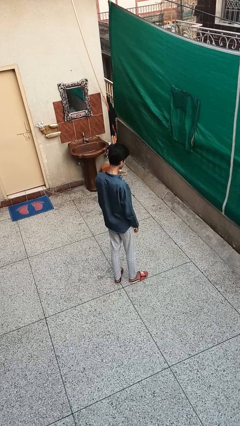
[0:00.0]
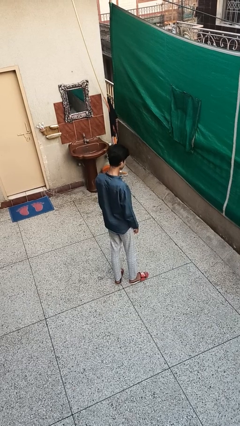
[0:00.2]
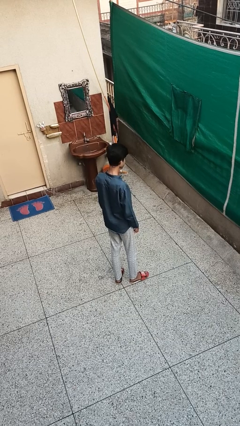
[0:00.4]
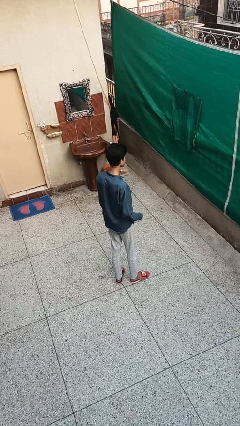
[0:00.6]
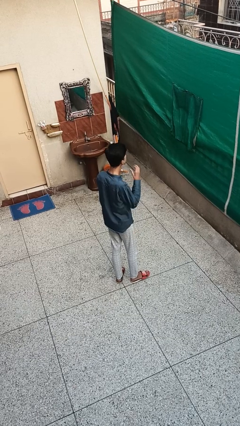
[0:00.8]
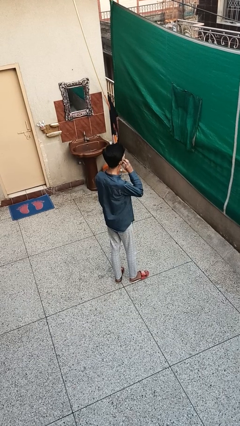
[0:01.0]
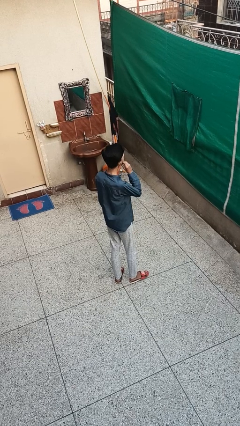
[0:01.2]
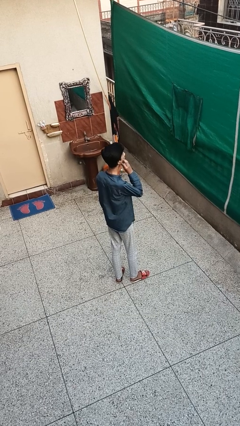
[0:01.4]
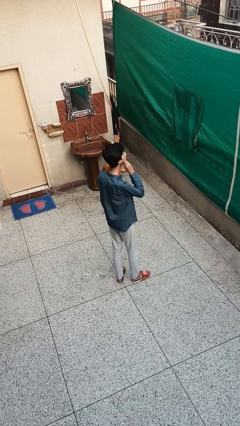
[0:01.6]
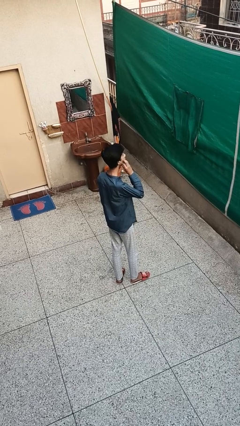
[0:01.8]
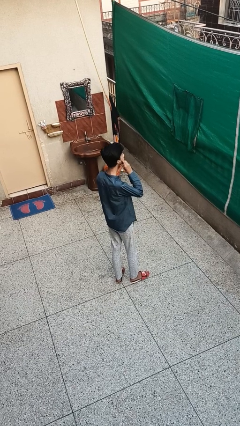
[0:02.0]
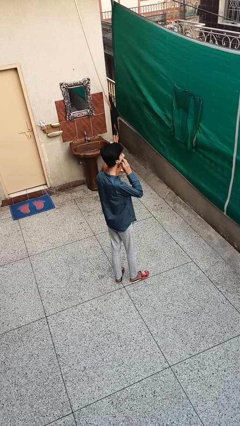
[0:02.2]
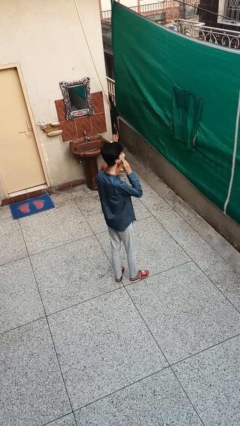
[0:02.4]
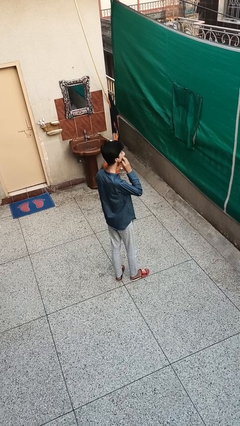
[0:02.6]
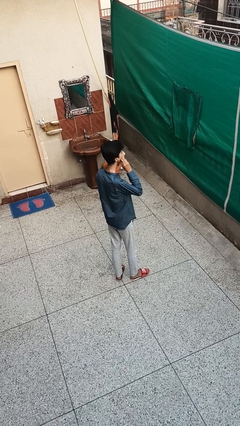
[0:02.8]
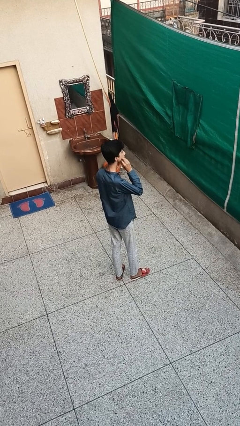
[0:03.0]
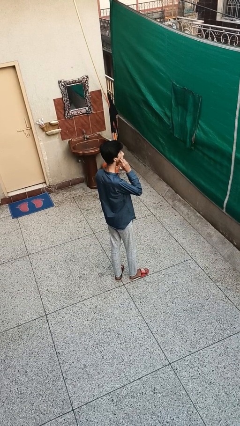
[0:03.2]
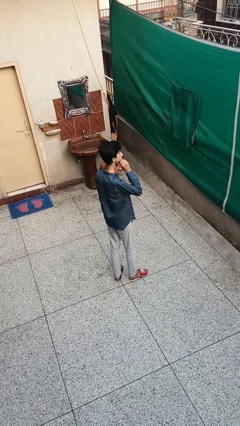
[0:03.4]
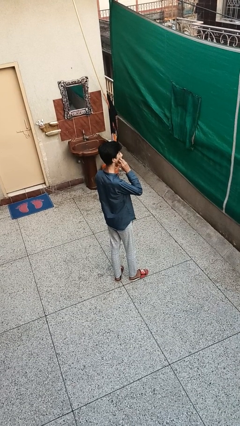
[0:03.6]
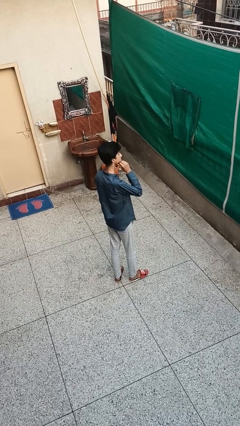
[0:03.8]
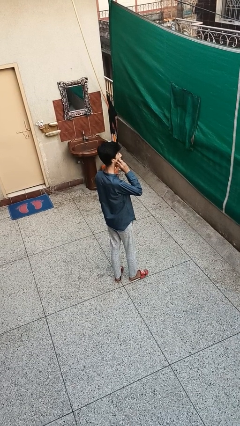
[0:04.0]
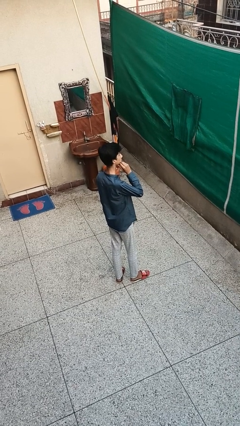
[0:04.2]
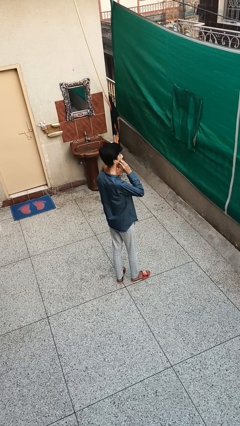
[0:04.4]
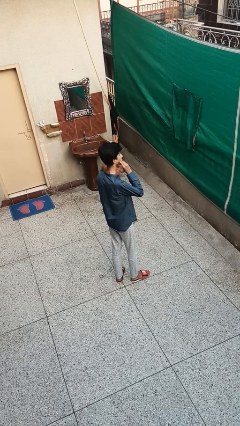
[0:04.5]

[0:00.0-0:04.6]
person scratches face

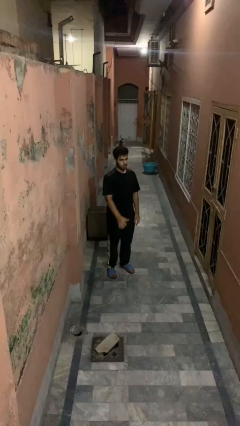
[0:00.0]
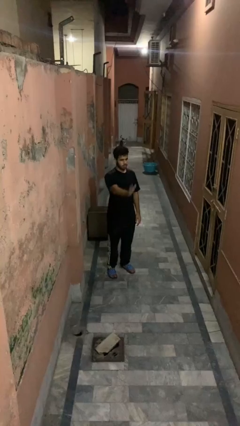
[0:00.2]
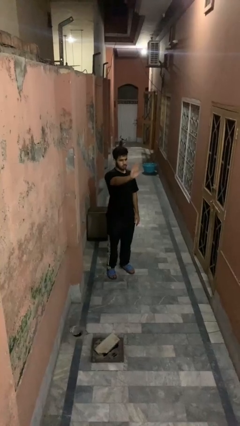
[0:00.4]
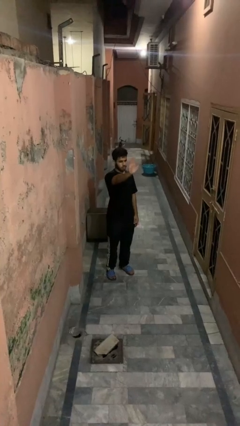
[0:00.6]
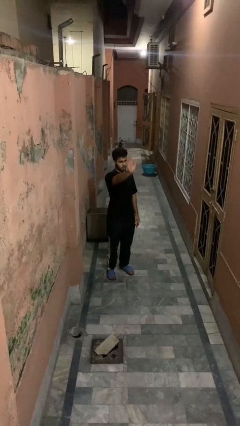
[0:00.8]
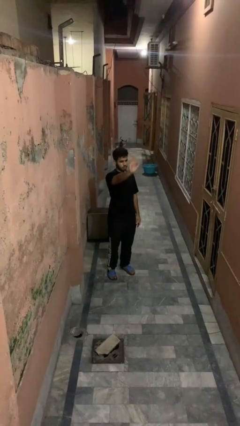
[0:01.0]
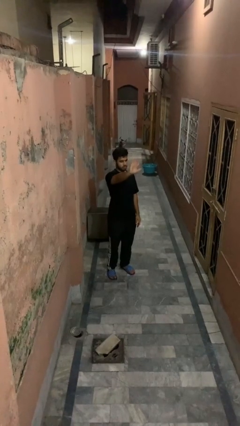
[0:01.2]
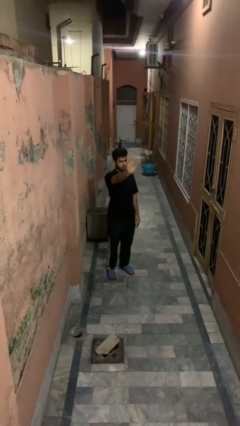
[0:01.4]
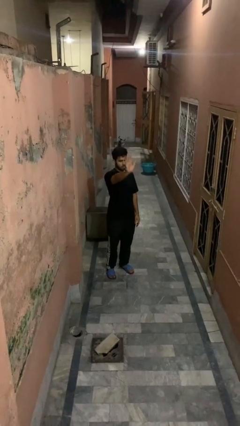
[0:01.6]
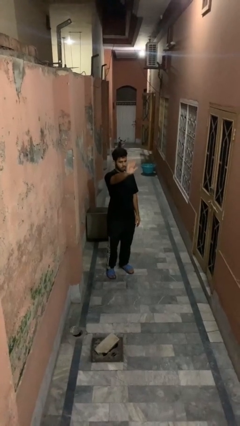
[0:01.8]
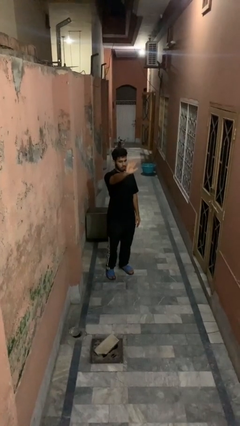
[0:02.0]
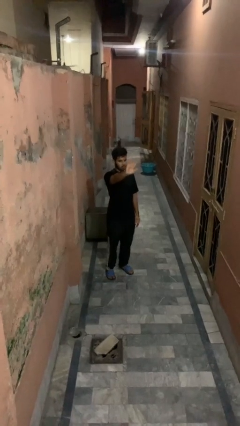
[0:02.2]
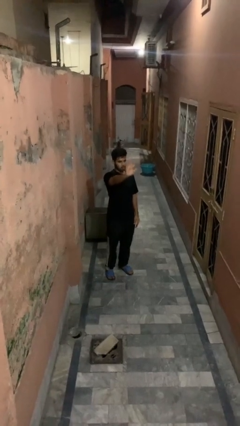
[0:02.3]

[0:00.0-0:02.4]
person waves at person

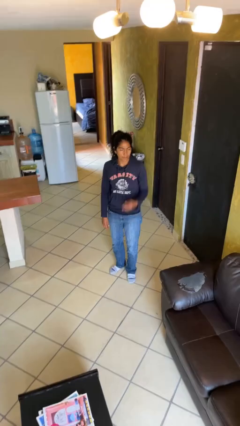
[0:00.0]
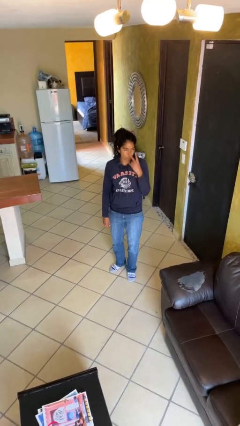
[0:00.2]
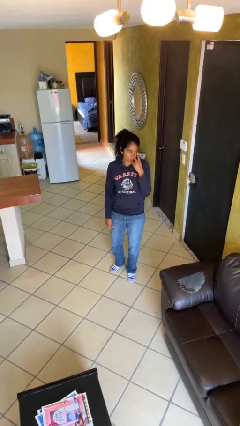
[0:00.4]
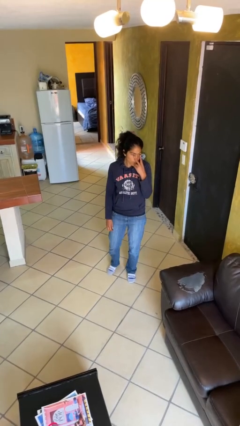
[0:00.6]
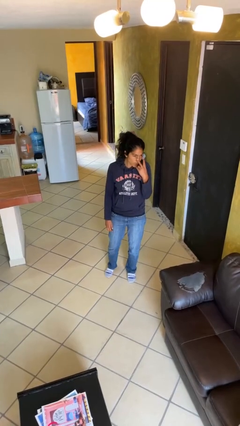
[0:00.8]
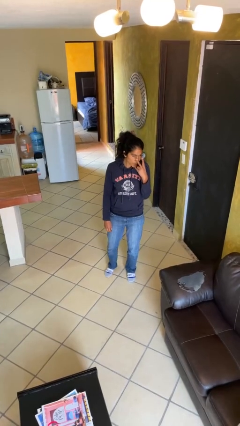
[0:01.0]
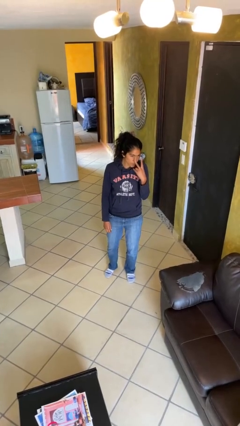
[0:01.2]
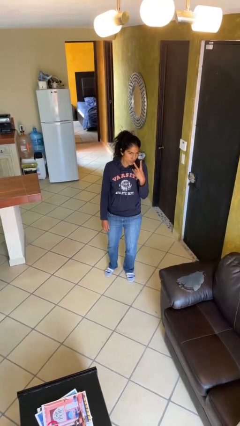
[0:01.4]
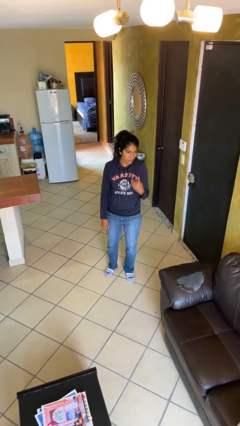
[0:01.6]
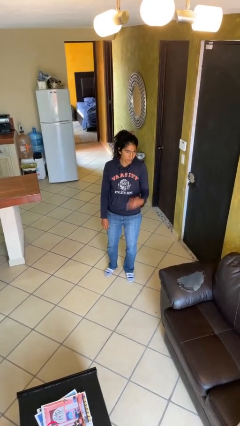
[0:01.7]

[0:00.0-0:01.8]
person gestures watch closely

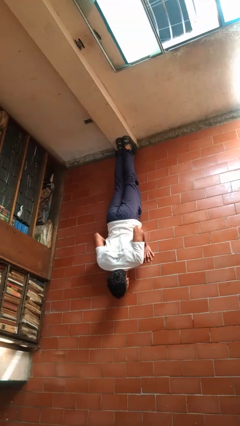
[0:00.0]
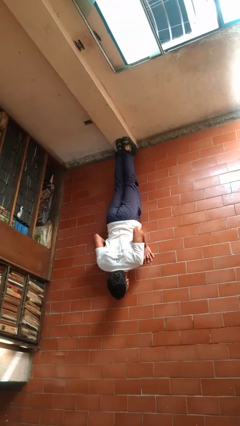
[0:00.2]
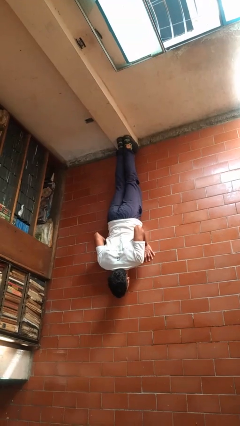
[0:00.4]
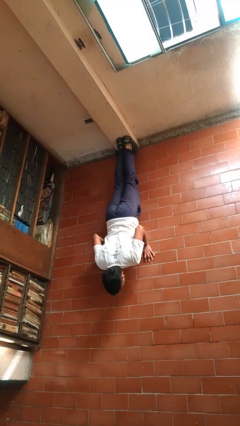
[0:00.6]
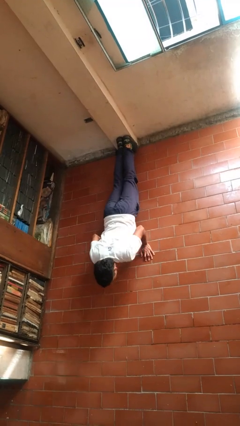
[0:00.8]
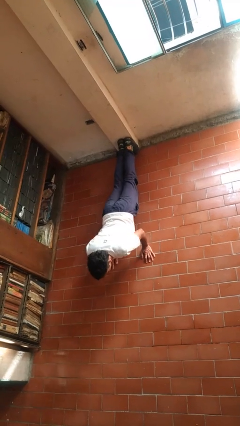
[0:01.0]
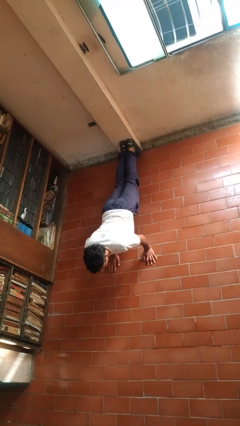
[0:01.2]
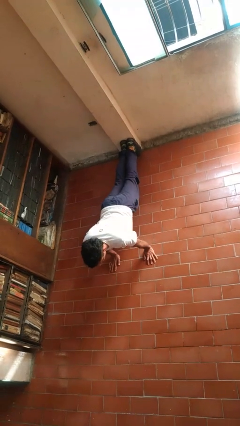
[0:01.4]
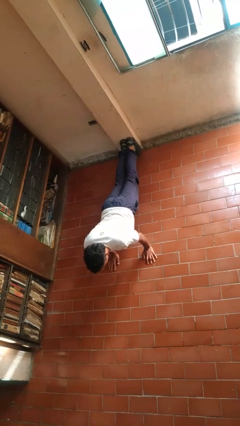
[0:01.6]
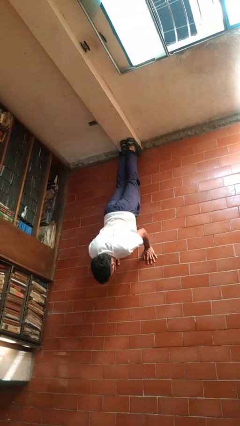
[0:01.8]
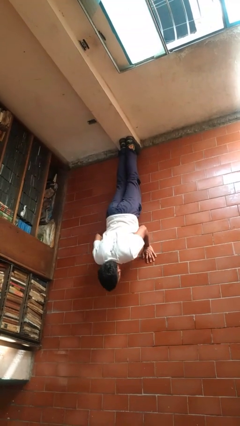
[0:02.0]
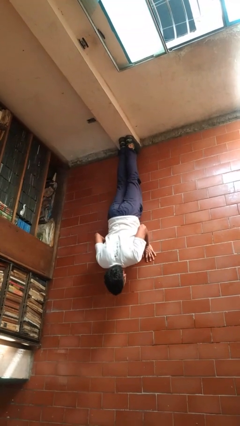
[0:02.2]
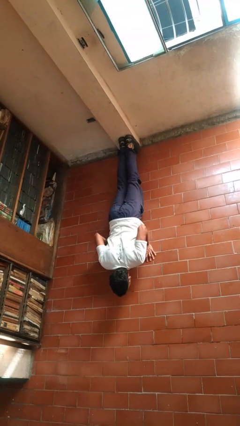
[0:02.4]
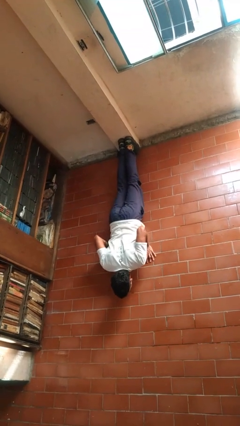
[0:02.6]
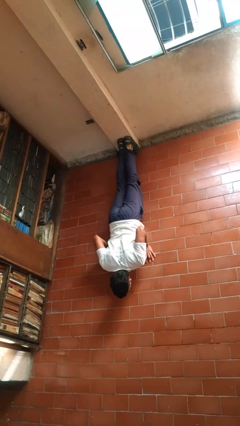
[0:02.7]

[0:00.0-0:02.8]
person exercises with pushup

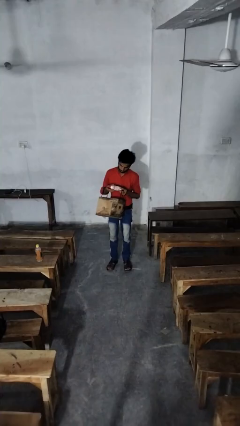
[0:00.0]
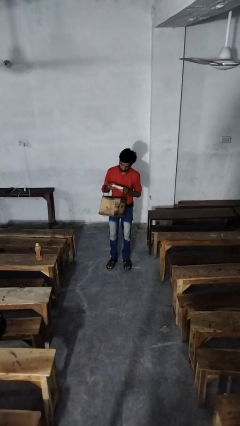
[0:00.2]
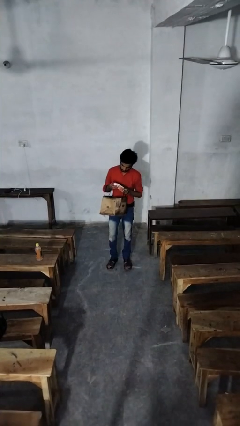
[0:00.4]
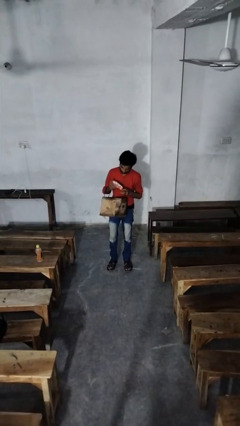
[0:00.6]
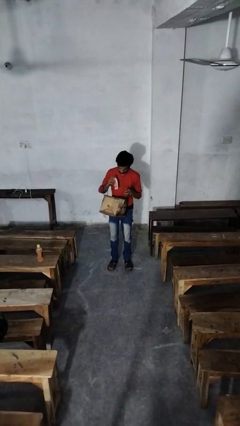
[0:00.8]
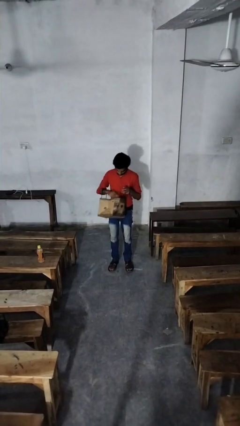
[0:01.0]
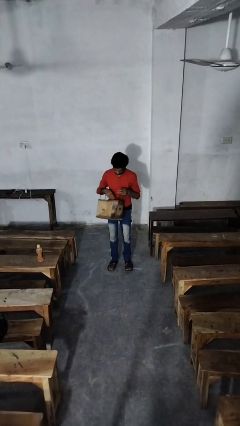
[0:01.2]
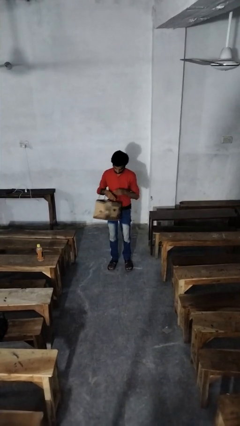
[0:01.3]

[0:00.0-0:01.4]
person puts object into purse

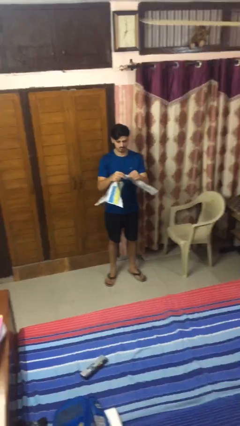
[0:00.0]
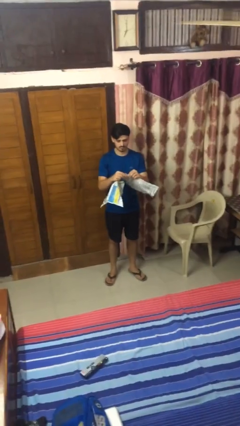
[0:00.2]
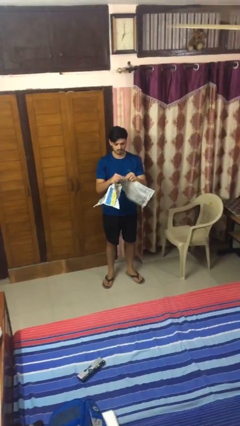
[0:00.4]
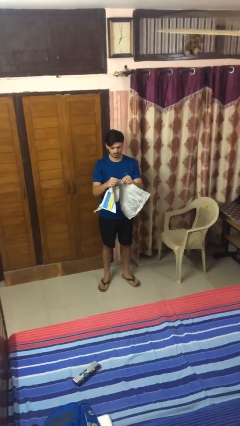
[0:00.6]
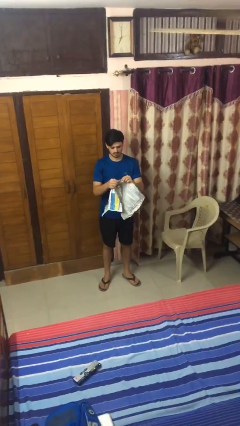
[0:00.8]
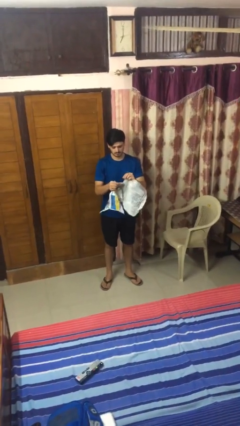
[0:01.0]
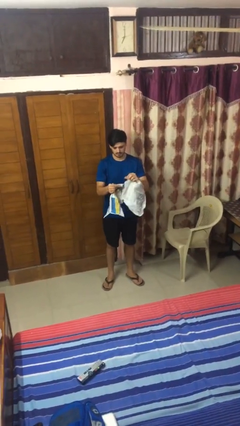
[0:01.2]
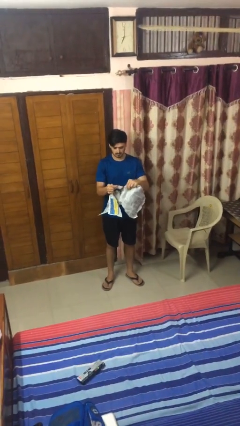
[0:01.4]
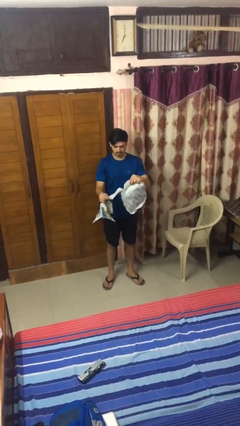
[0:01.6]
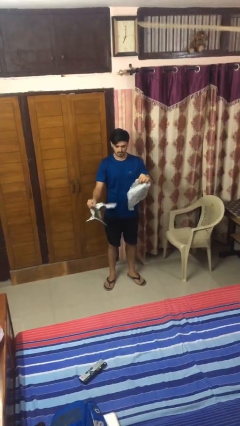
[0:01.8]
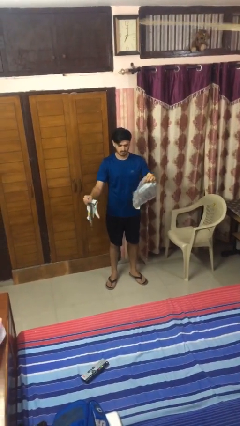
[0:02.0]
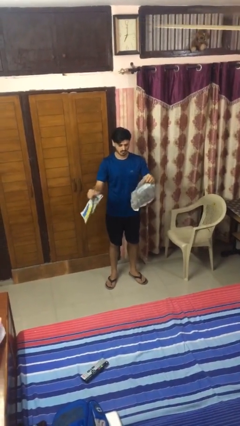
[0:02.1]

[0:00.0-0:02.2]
person tears paper

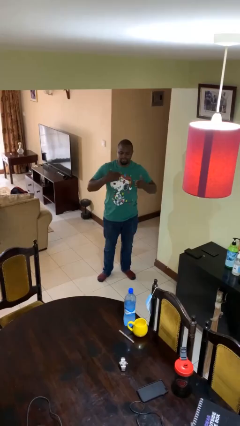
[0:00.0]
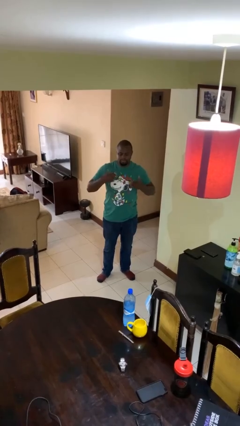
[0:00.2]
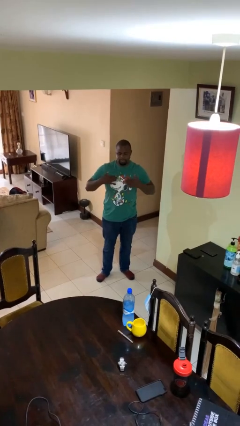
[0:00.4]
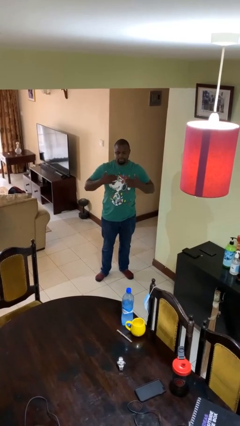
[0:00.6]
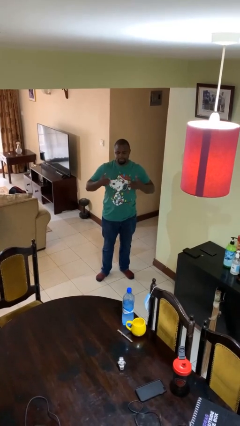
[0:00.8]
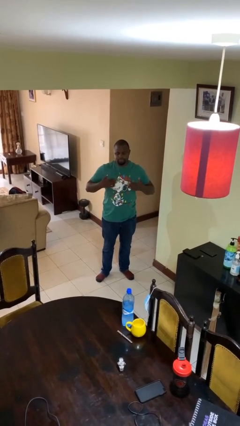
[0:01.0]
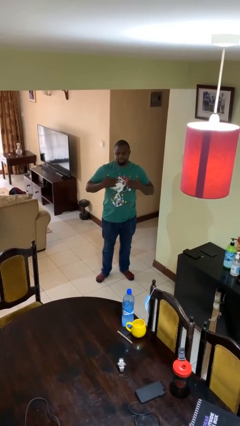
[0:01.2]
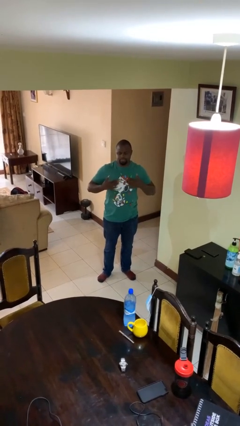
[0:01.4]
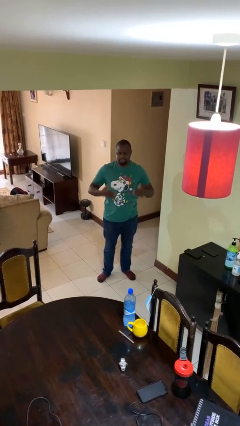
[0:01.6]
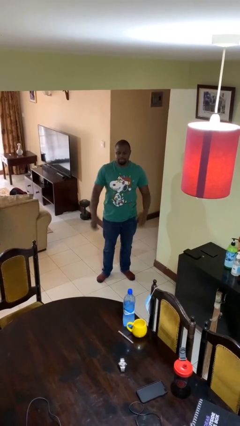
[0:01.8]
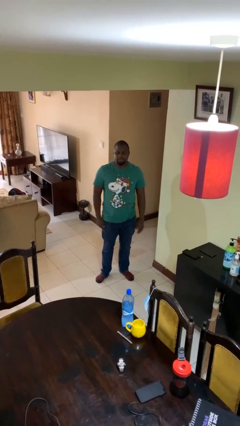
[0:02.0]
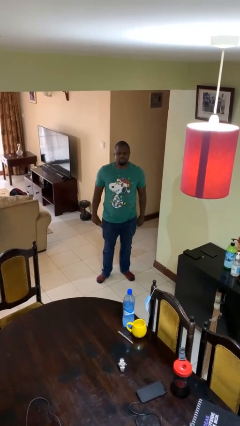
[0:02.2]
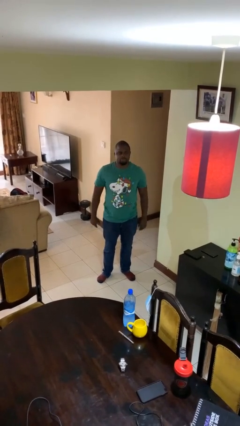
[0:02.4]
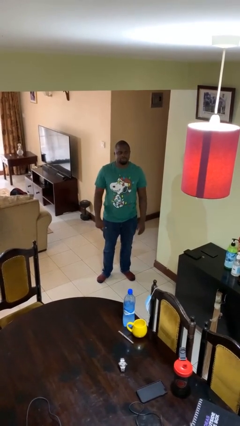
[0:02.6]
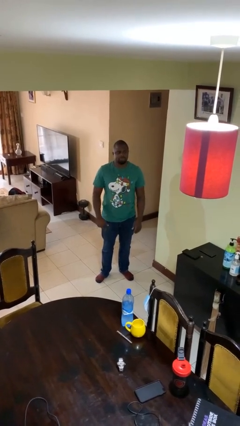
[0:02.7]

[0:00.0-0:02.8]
person drums on chest
